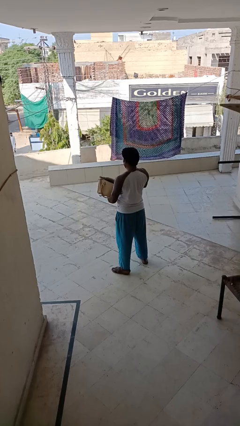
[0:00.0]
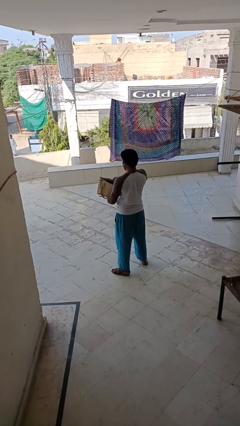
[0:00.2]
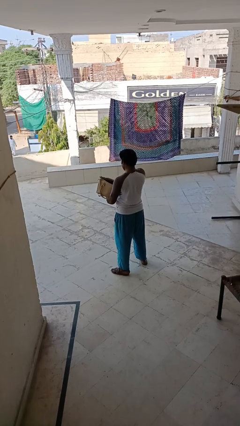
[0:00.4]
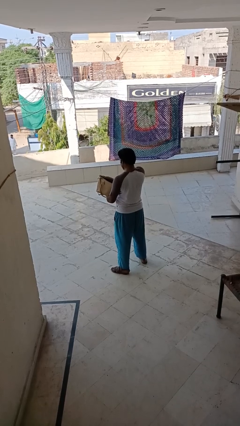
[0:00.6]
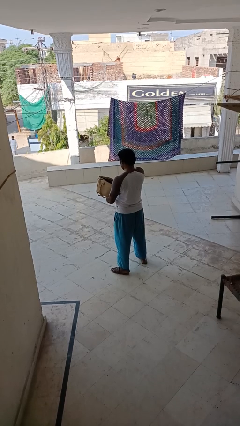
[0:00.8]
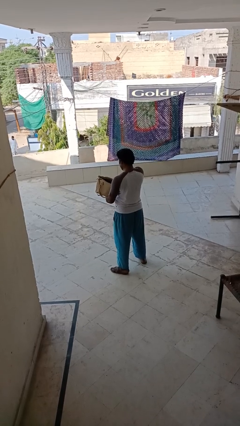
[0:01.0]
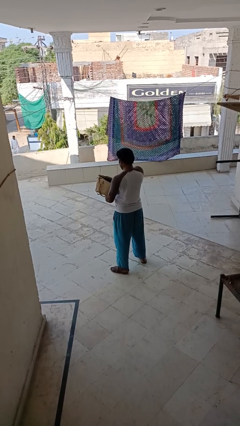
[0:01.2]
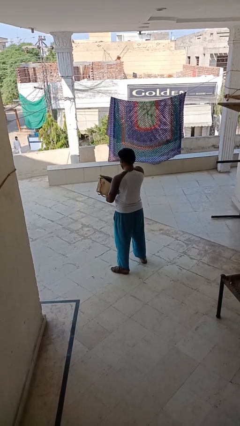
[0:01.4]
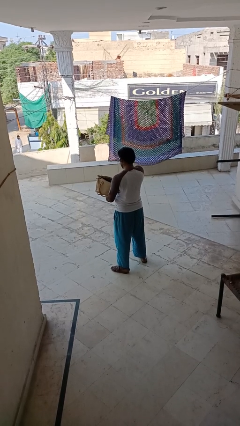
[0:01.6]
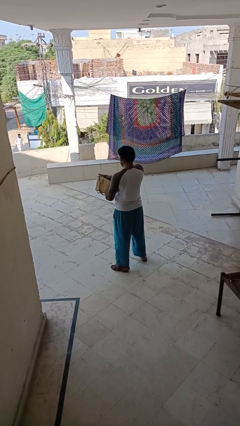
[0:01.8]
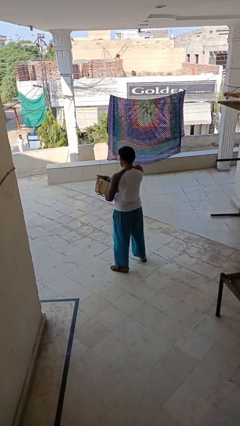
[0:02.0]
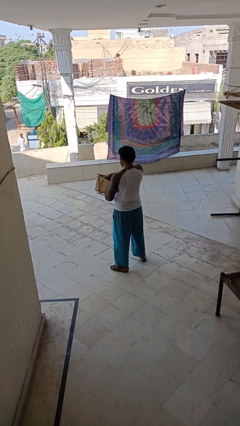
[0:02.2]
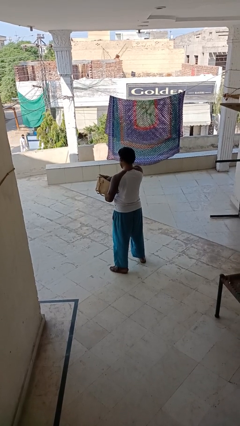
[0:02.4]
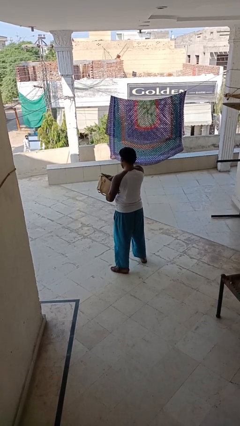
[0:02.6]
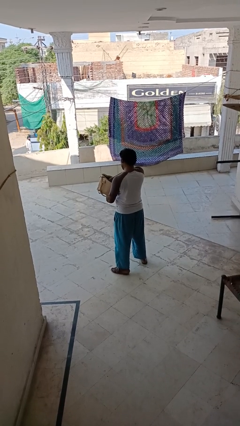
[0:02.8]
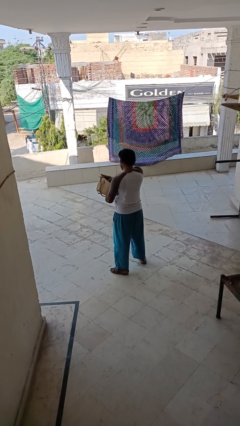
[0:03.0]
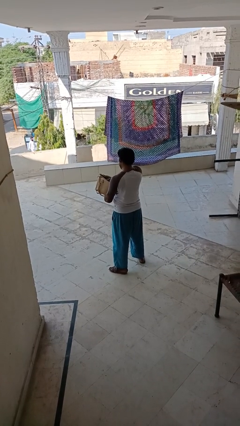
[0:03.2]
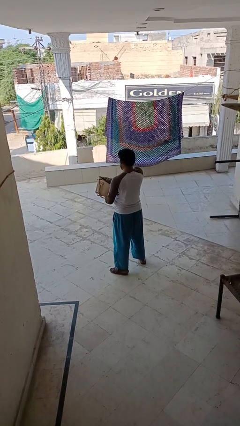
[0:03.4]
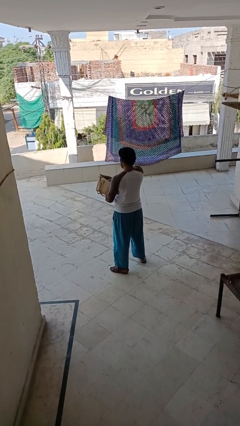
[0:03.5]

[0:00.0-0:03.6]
person searches in purse

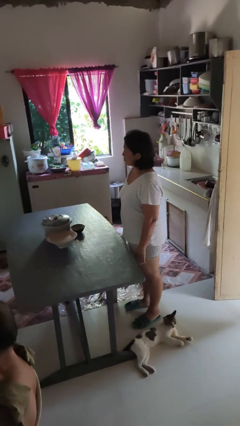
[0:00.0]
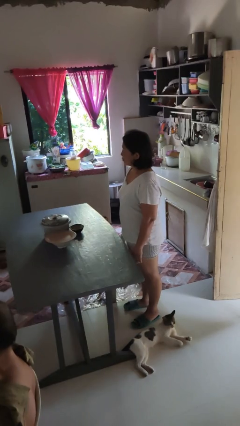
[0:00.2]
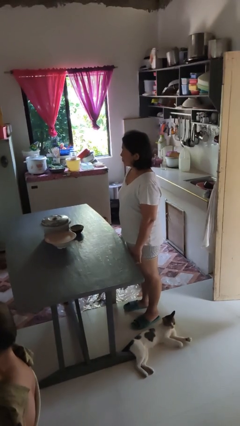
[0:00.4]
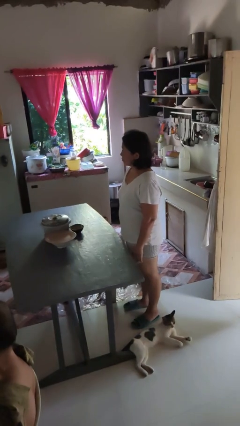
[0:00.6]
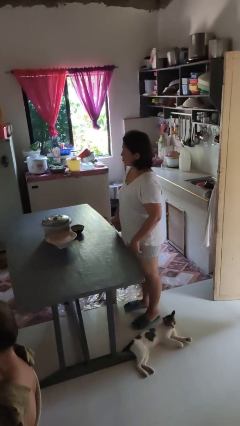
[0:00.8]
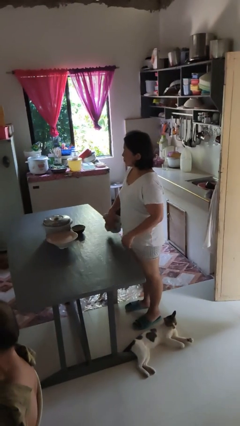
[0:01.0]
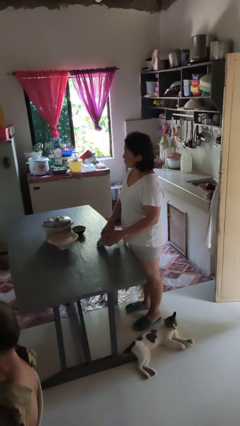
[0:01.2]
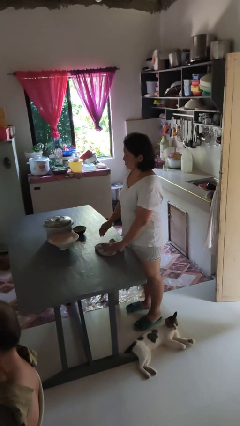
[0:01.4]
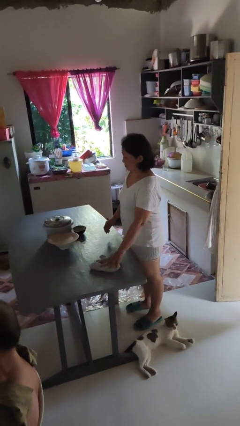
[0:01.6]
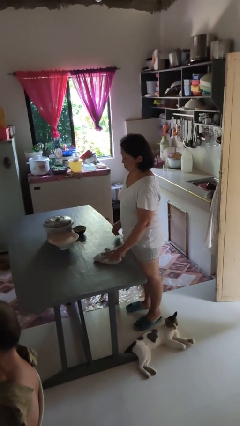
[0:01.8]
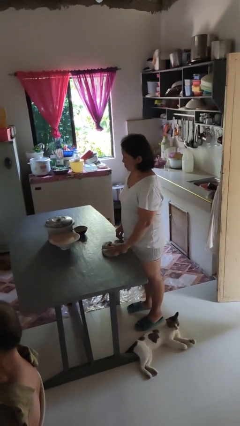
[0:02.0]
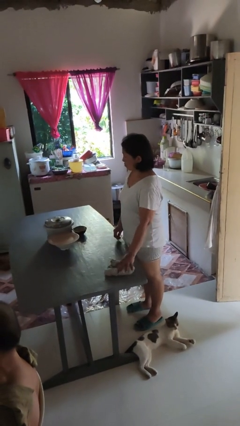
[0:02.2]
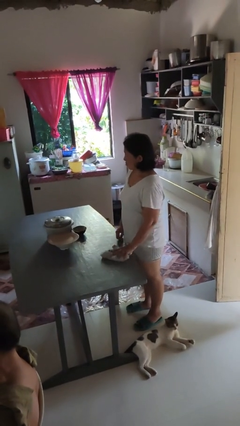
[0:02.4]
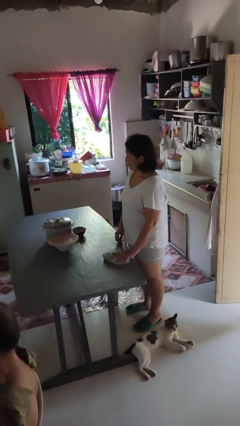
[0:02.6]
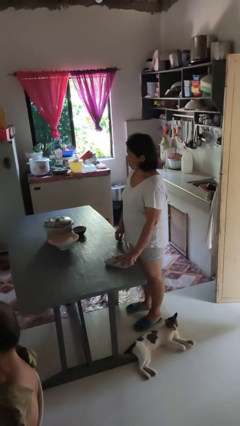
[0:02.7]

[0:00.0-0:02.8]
person cleans table with rag

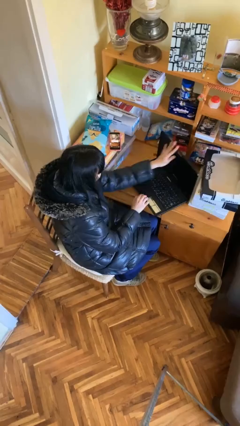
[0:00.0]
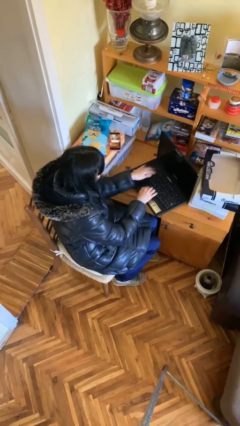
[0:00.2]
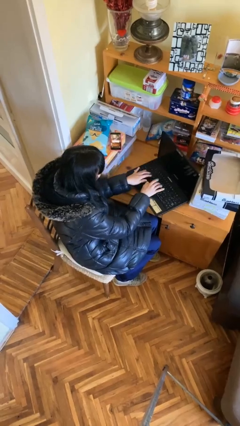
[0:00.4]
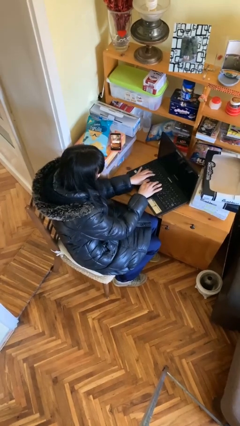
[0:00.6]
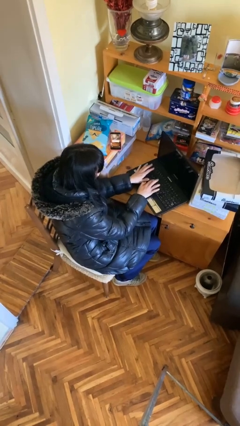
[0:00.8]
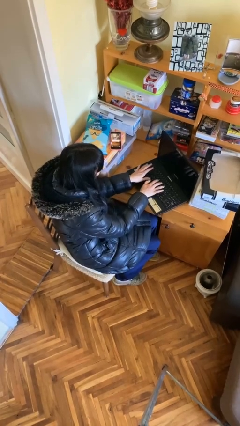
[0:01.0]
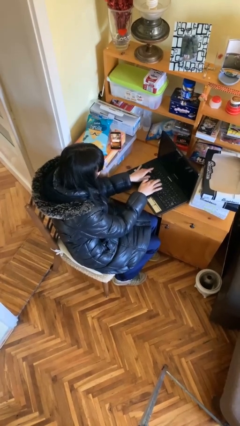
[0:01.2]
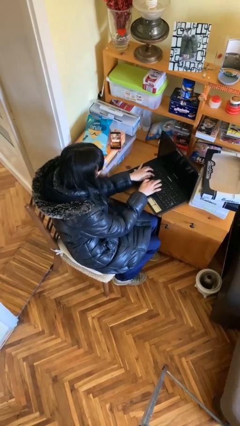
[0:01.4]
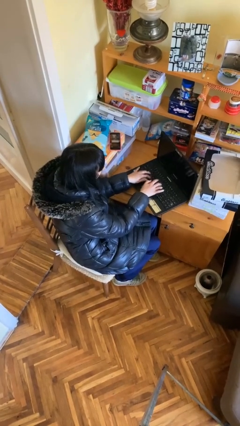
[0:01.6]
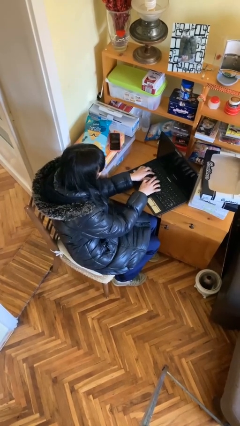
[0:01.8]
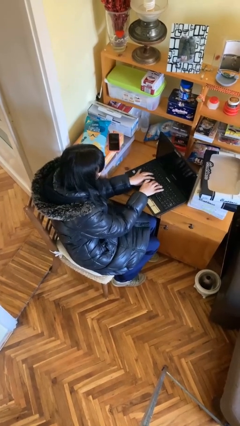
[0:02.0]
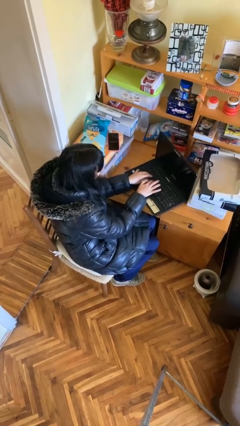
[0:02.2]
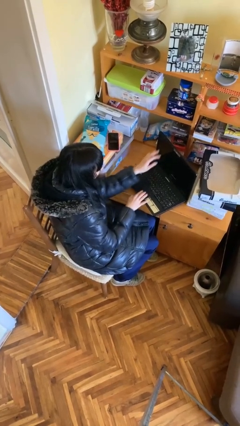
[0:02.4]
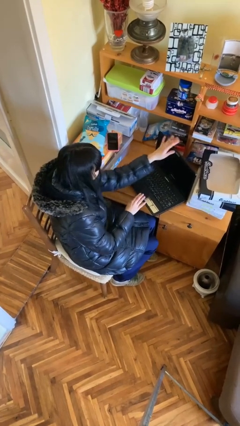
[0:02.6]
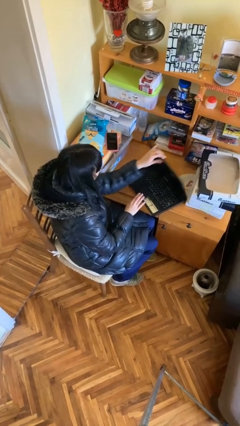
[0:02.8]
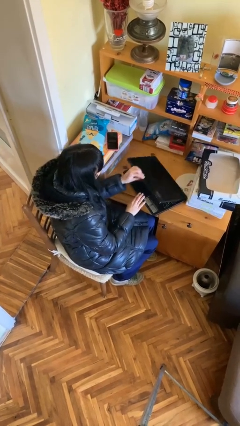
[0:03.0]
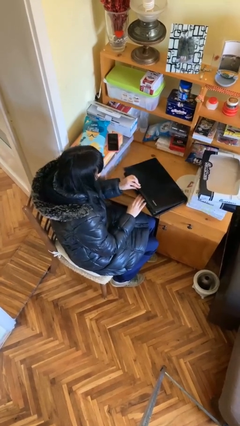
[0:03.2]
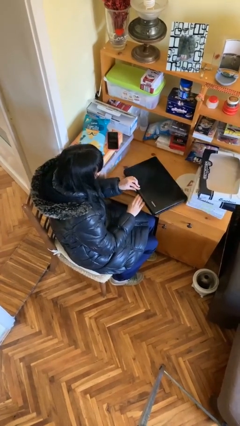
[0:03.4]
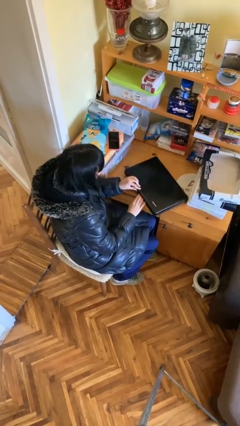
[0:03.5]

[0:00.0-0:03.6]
person interacts with laptop

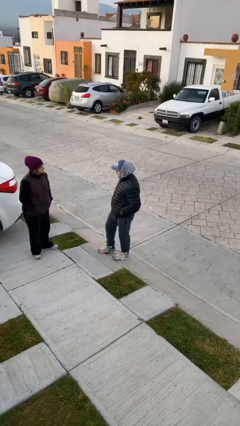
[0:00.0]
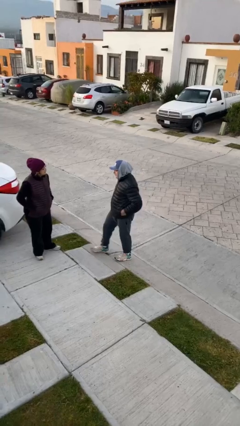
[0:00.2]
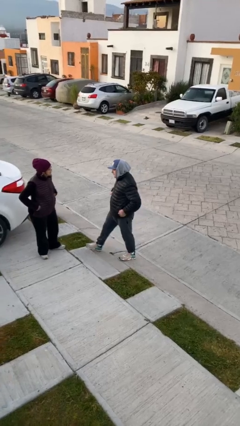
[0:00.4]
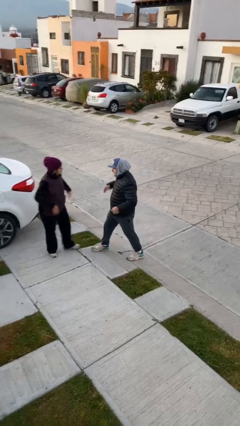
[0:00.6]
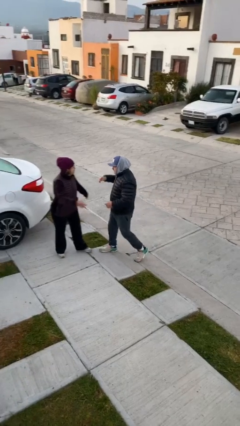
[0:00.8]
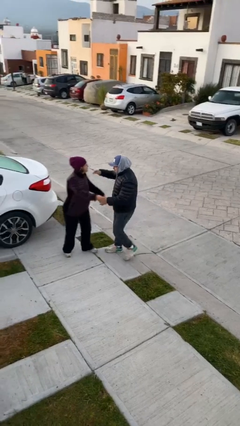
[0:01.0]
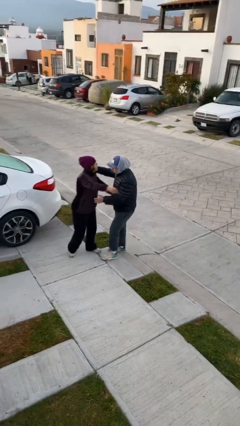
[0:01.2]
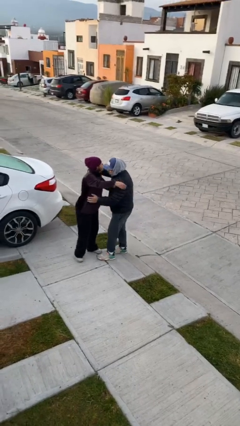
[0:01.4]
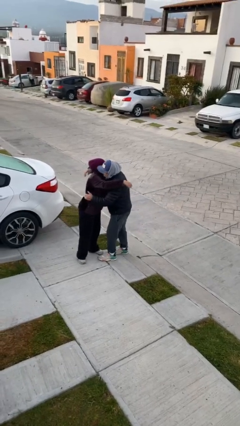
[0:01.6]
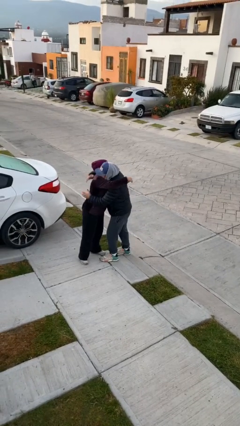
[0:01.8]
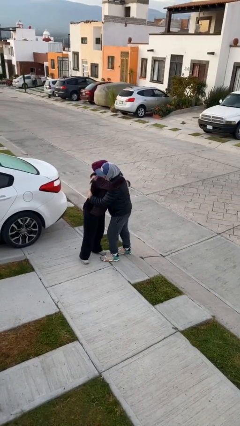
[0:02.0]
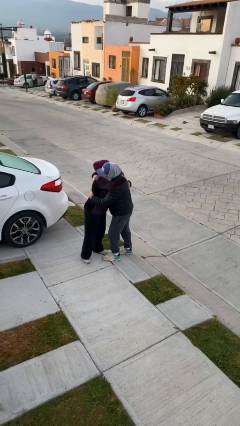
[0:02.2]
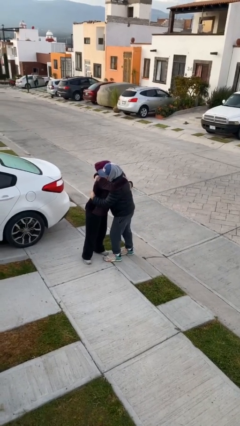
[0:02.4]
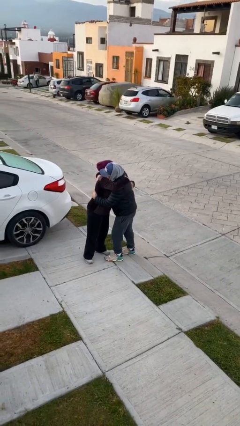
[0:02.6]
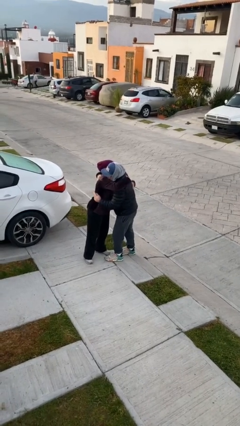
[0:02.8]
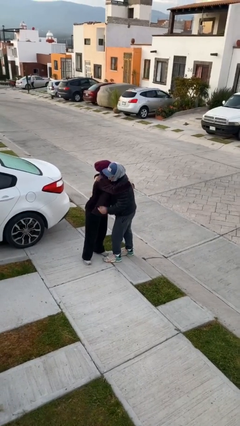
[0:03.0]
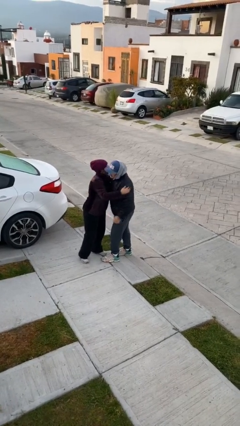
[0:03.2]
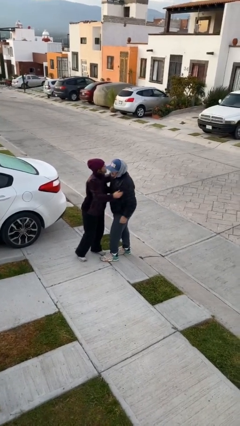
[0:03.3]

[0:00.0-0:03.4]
person embraces person

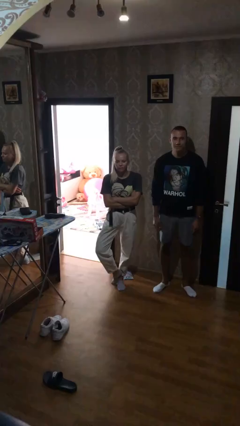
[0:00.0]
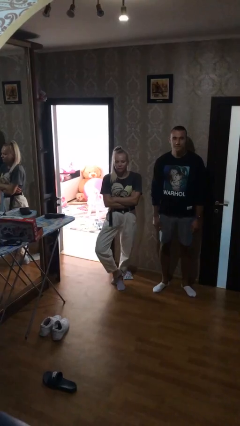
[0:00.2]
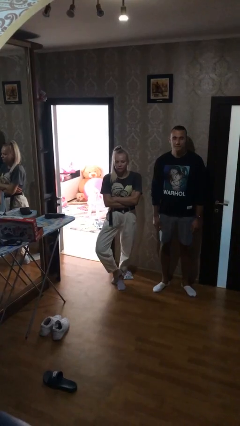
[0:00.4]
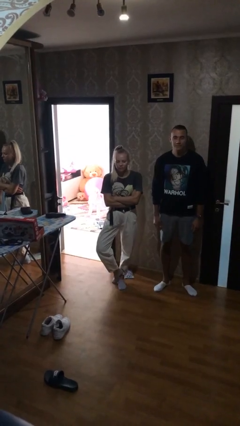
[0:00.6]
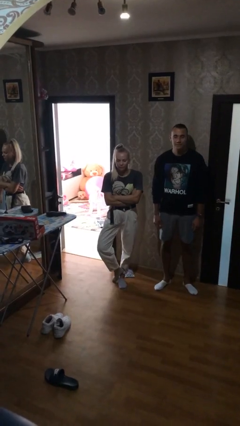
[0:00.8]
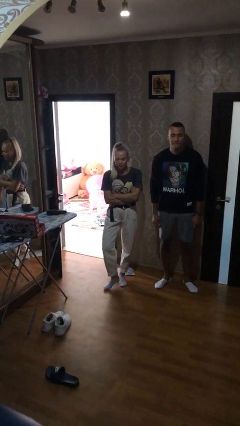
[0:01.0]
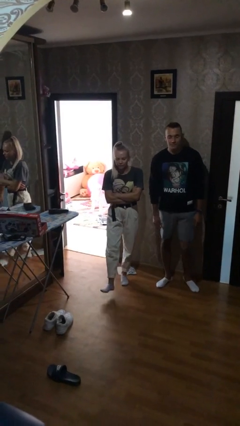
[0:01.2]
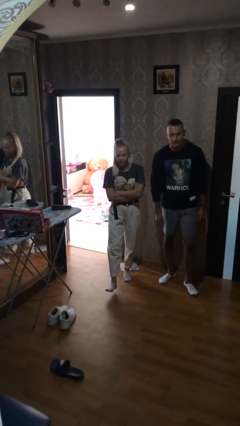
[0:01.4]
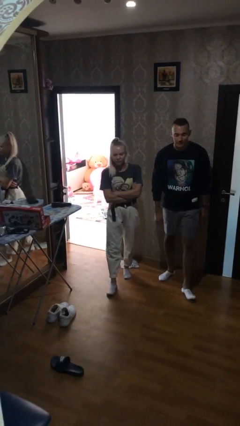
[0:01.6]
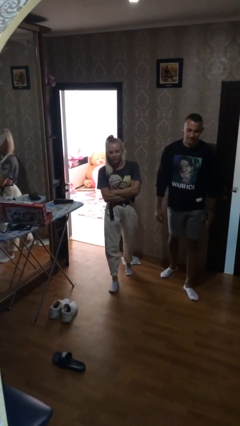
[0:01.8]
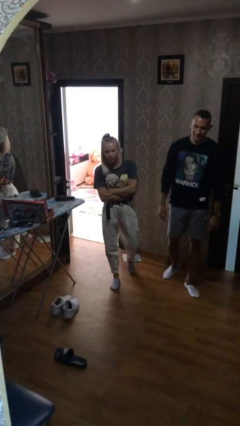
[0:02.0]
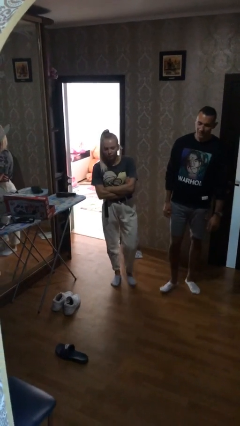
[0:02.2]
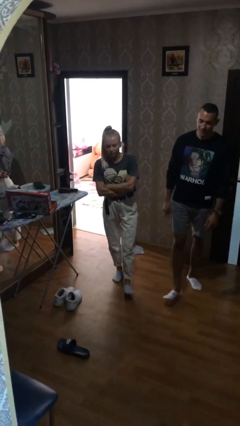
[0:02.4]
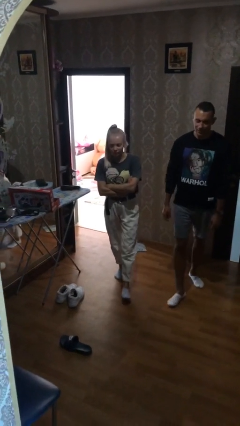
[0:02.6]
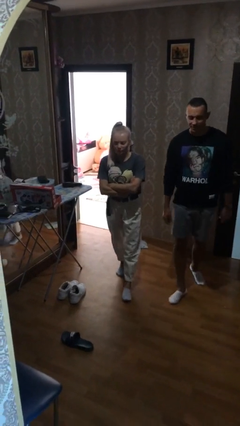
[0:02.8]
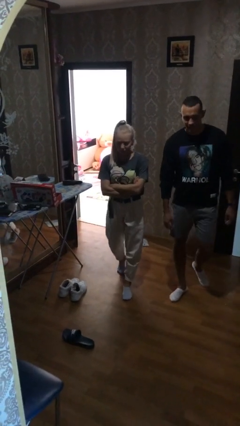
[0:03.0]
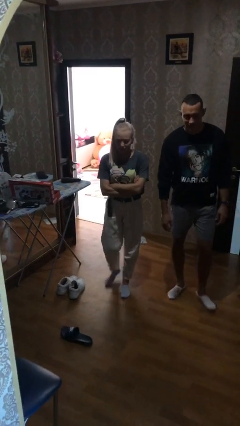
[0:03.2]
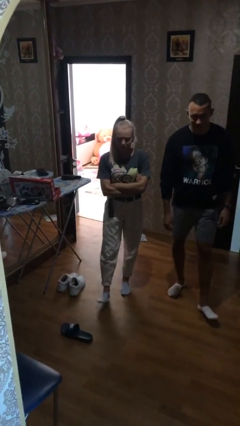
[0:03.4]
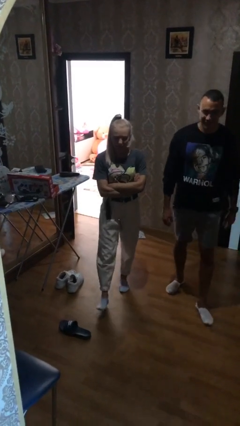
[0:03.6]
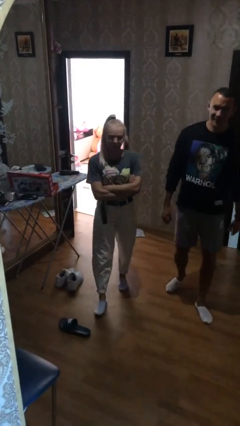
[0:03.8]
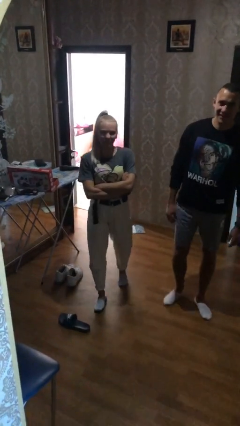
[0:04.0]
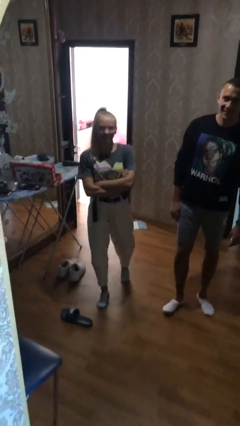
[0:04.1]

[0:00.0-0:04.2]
person talks to person
